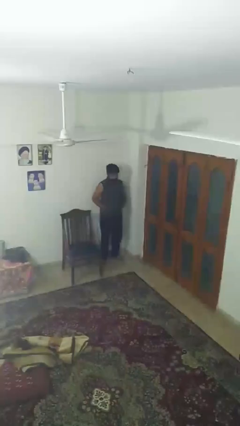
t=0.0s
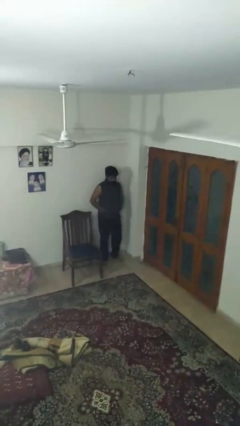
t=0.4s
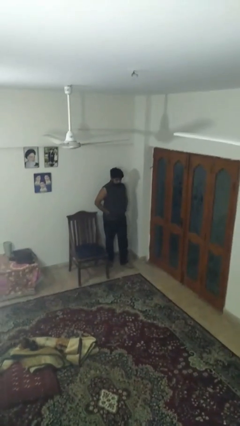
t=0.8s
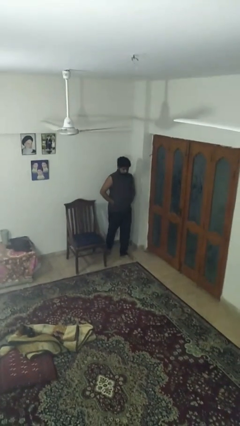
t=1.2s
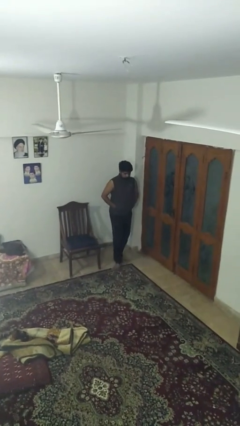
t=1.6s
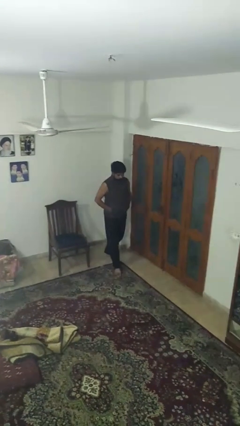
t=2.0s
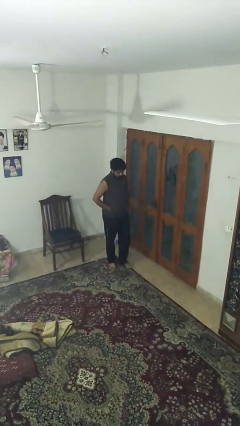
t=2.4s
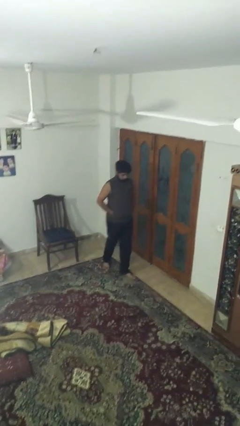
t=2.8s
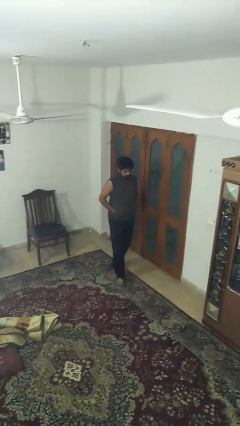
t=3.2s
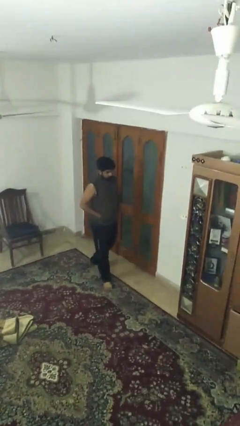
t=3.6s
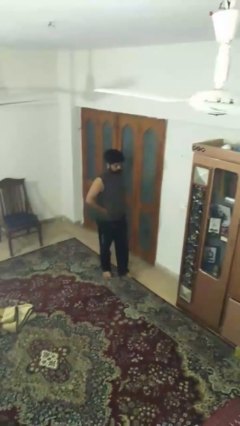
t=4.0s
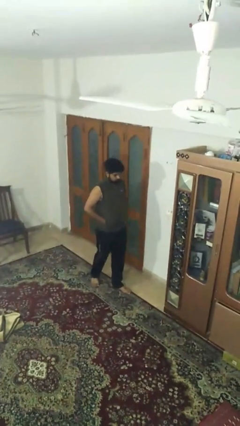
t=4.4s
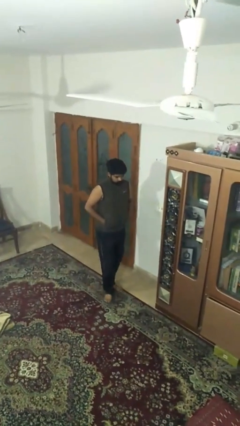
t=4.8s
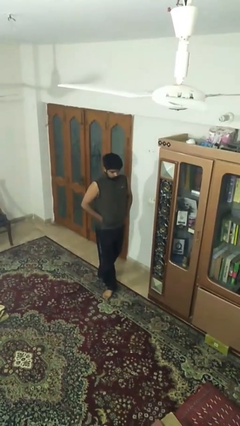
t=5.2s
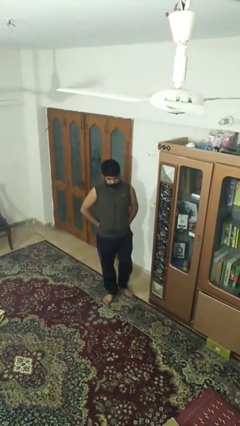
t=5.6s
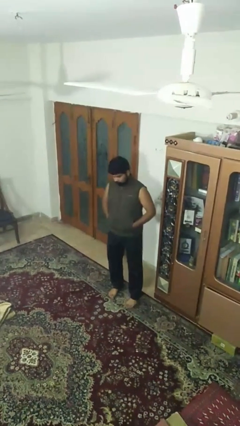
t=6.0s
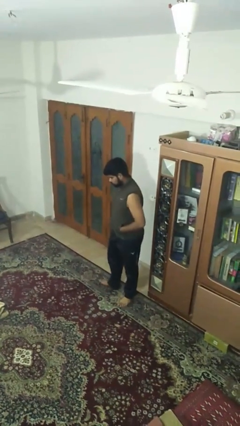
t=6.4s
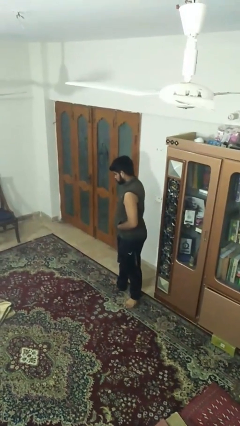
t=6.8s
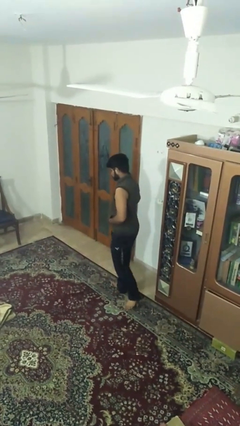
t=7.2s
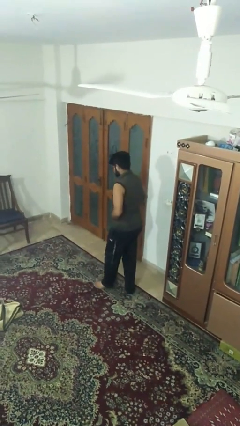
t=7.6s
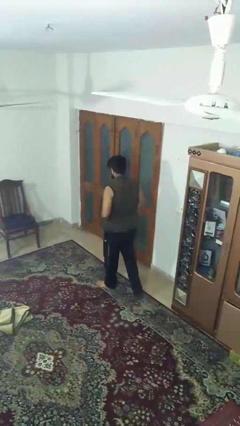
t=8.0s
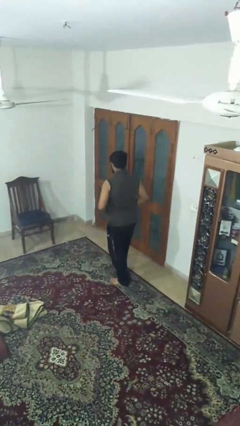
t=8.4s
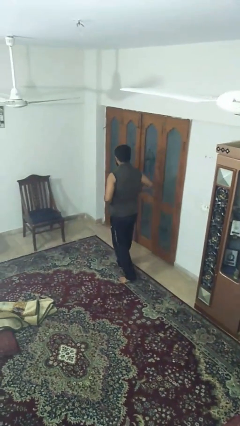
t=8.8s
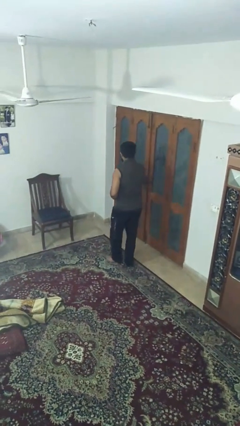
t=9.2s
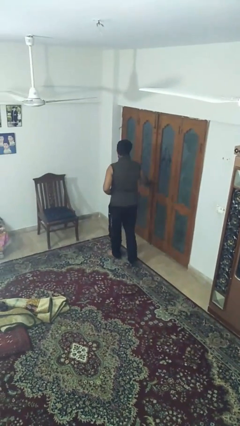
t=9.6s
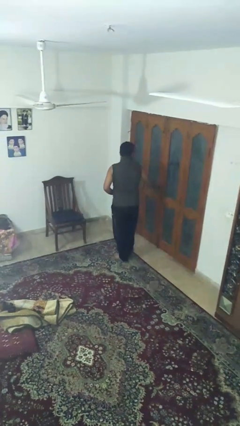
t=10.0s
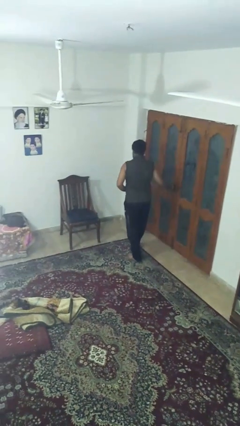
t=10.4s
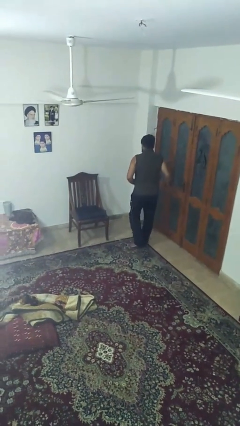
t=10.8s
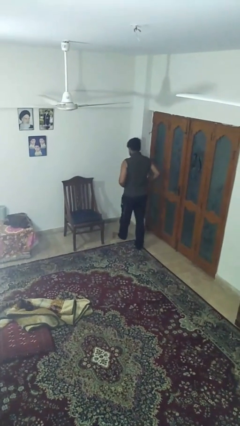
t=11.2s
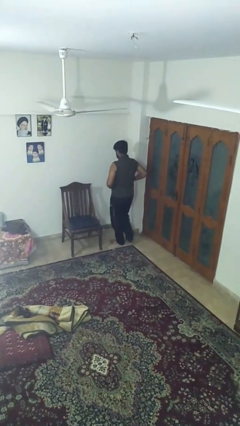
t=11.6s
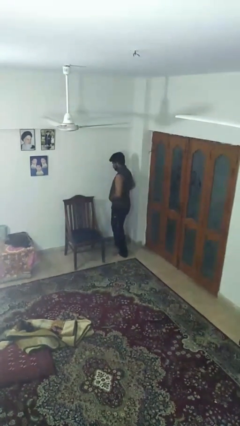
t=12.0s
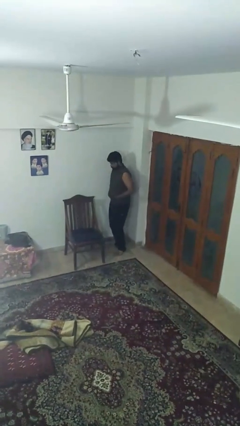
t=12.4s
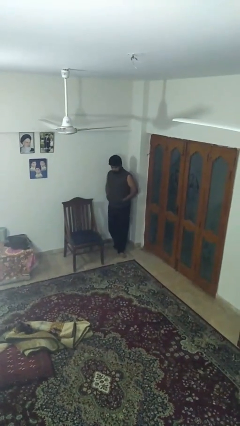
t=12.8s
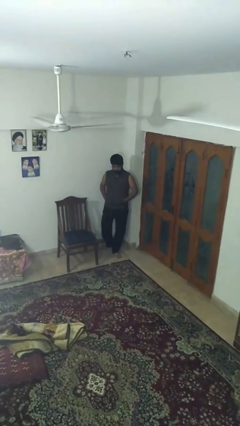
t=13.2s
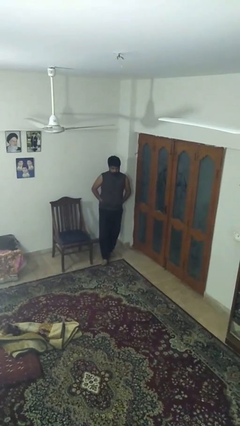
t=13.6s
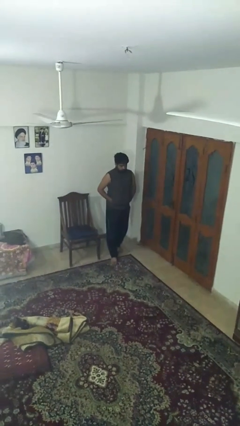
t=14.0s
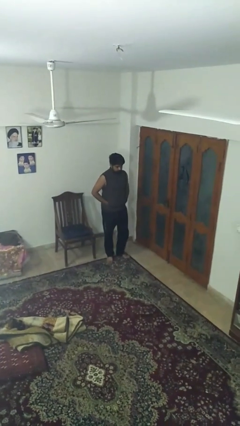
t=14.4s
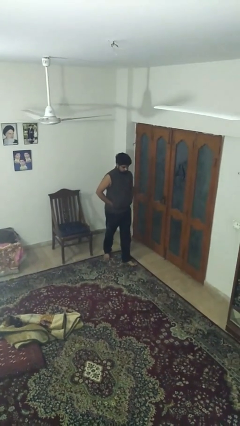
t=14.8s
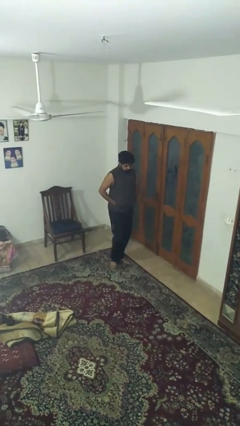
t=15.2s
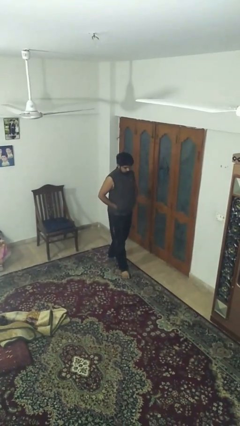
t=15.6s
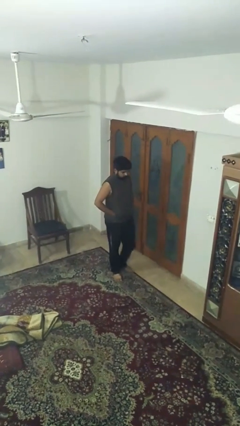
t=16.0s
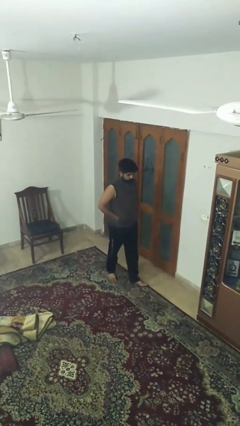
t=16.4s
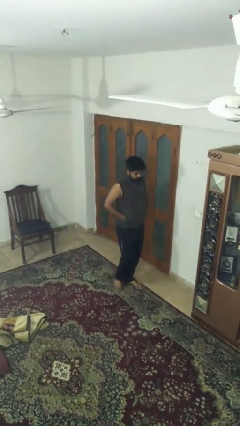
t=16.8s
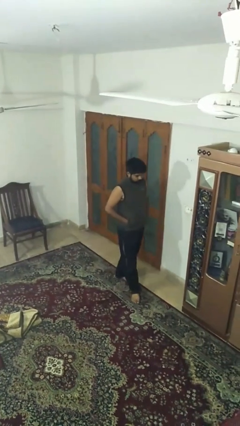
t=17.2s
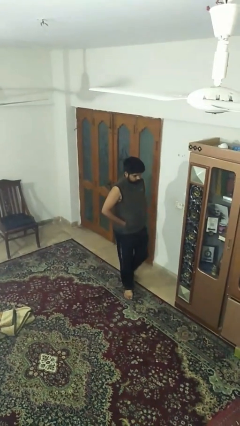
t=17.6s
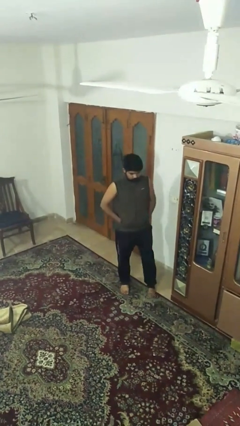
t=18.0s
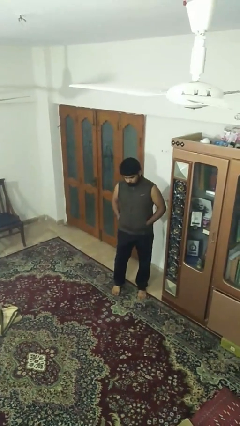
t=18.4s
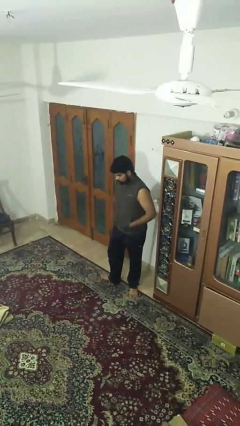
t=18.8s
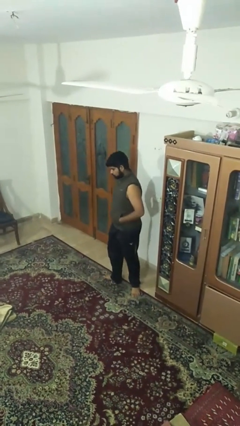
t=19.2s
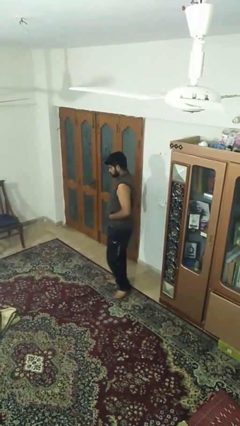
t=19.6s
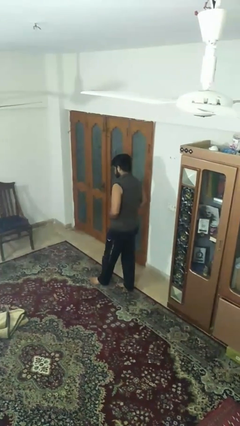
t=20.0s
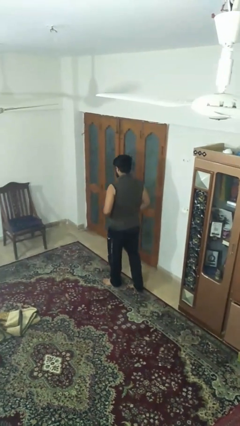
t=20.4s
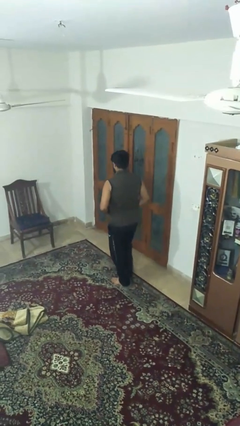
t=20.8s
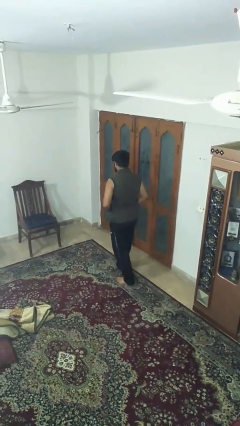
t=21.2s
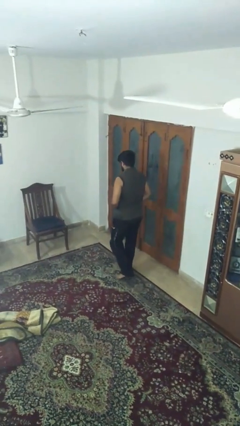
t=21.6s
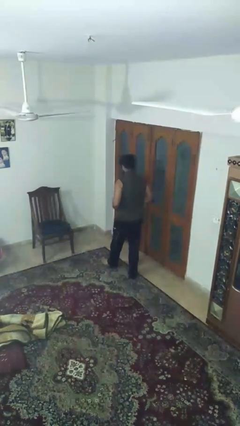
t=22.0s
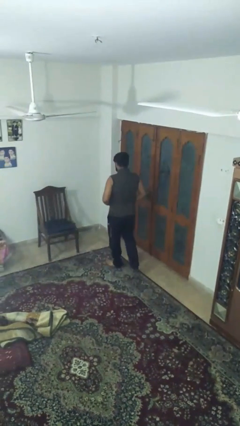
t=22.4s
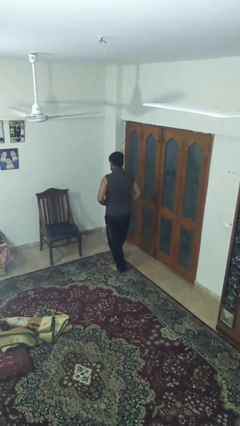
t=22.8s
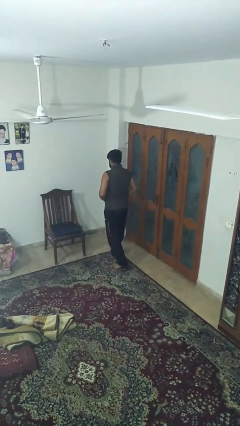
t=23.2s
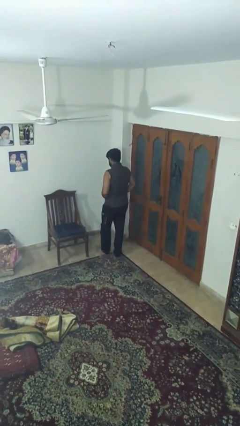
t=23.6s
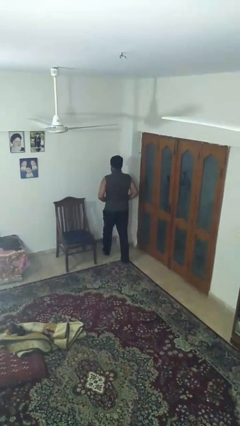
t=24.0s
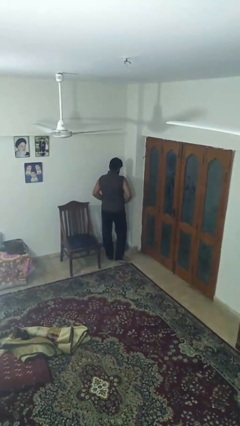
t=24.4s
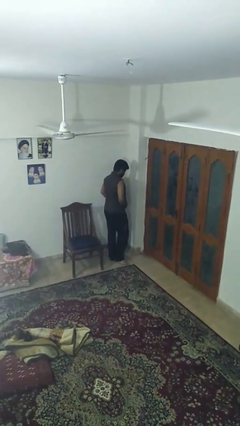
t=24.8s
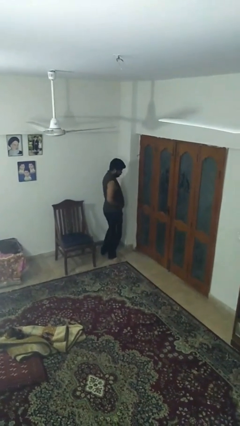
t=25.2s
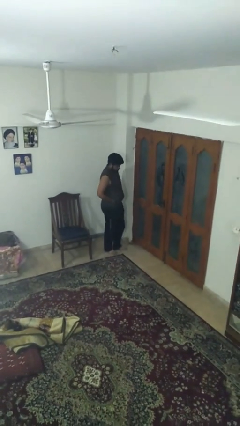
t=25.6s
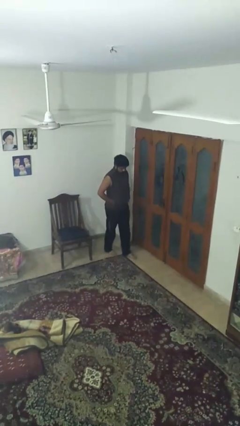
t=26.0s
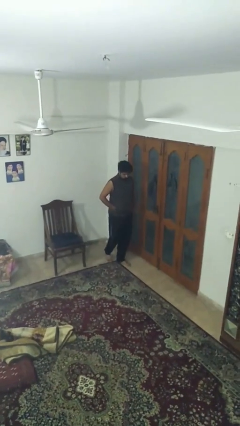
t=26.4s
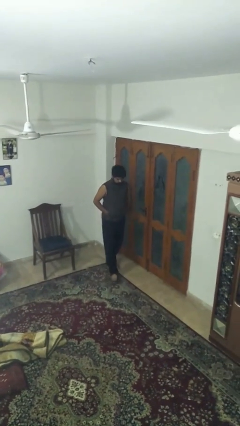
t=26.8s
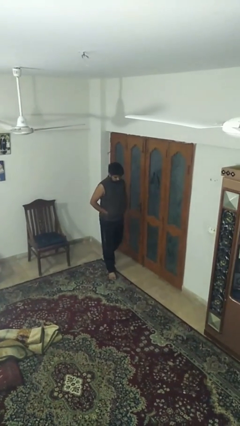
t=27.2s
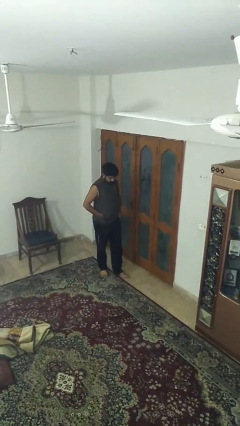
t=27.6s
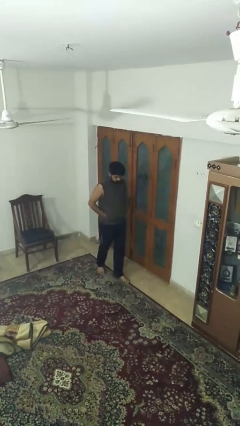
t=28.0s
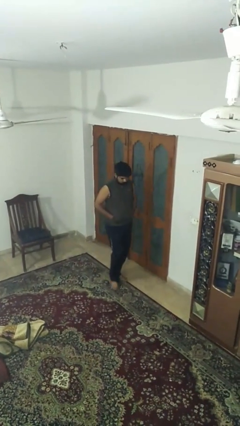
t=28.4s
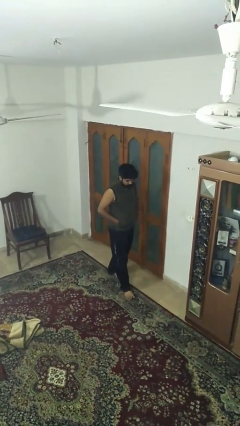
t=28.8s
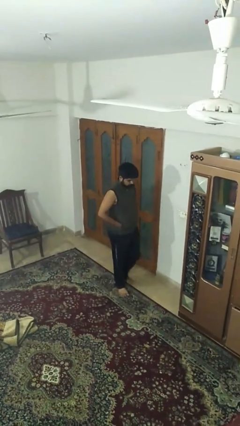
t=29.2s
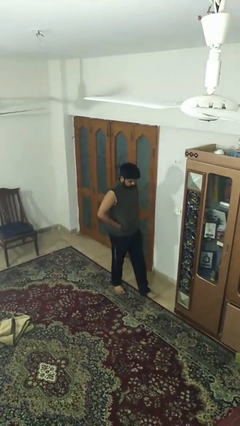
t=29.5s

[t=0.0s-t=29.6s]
person walks

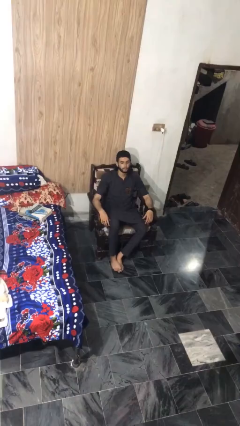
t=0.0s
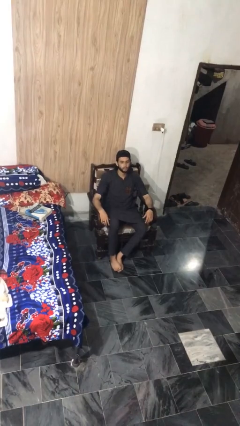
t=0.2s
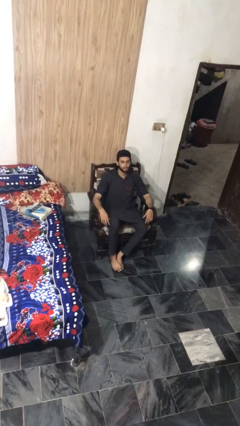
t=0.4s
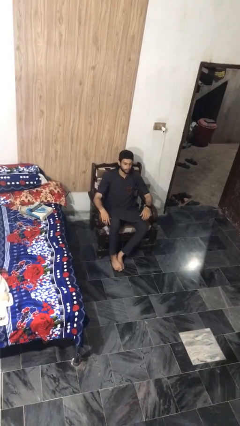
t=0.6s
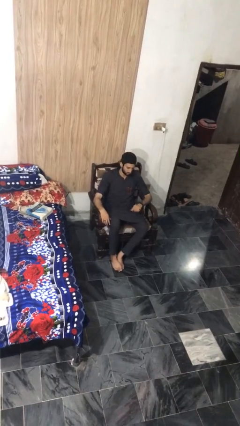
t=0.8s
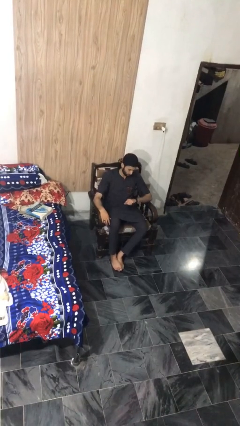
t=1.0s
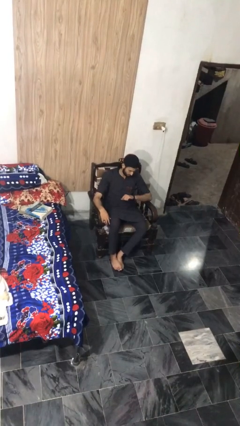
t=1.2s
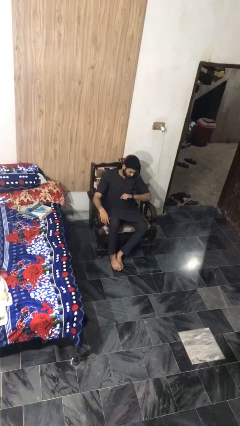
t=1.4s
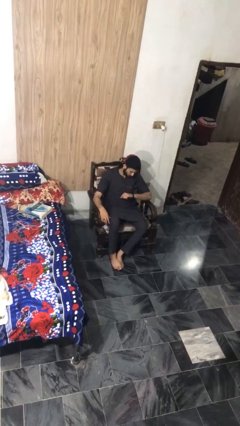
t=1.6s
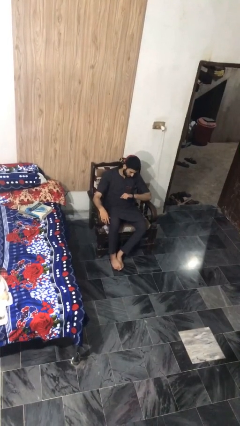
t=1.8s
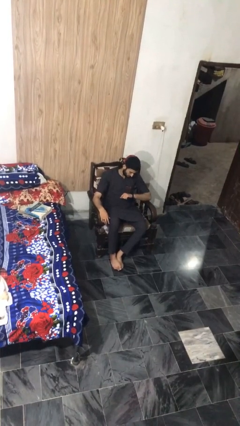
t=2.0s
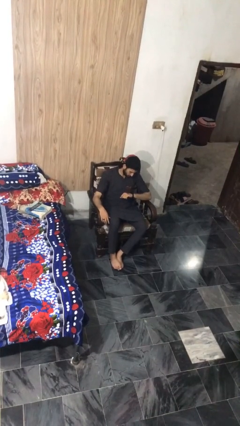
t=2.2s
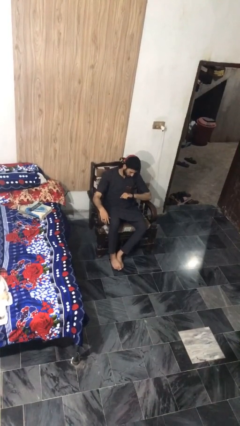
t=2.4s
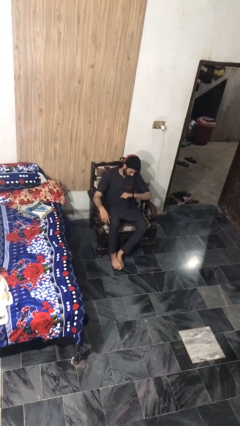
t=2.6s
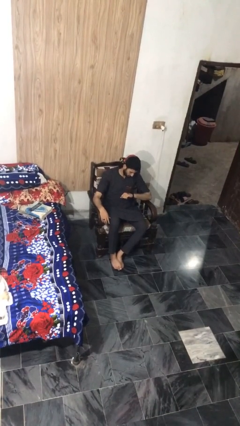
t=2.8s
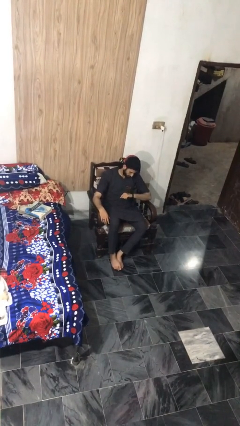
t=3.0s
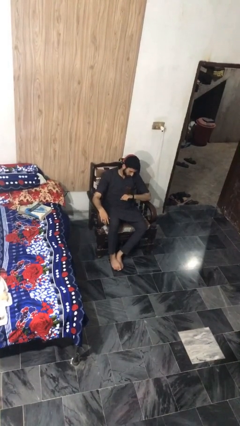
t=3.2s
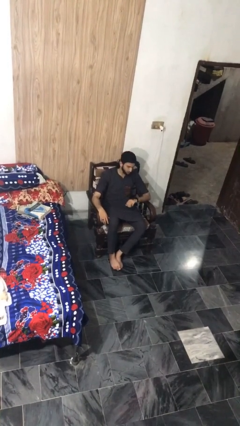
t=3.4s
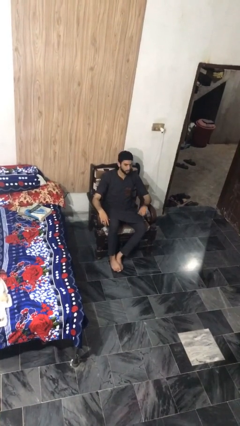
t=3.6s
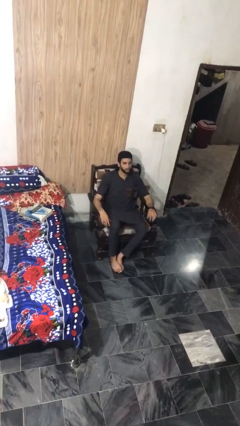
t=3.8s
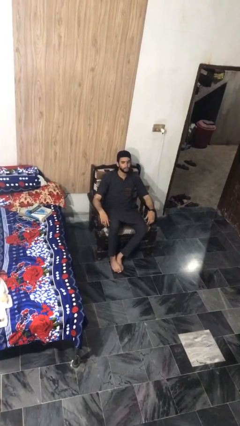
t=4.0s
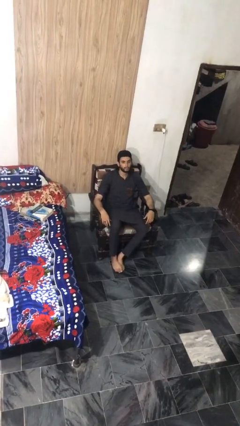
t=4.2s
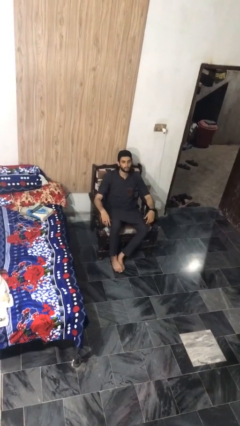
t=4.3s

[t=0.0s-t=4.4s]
person looks at wristwatch
